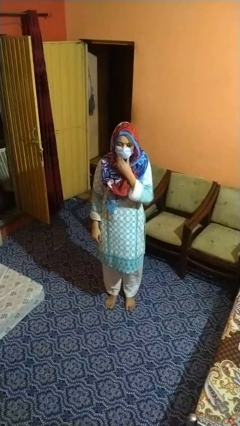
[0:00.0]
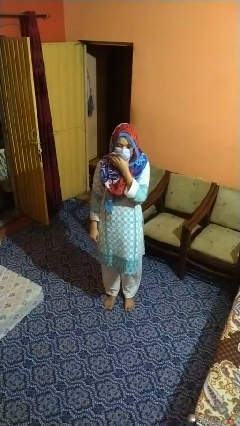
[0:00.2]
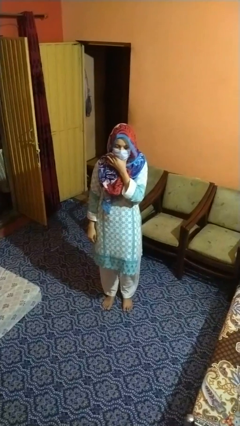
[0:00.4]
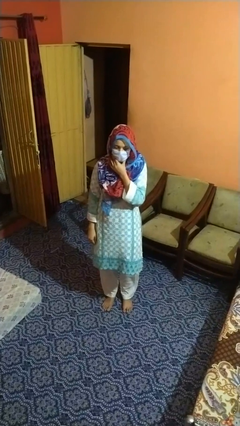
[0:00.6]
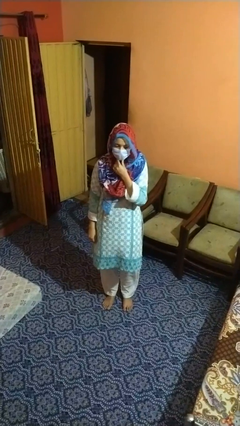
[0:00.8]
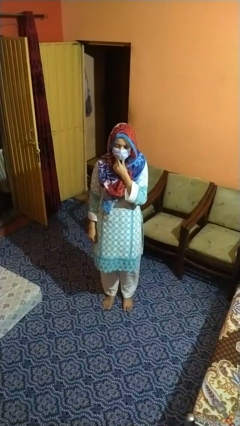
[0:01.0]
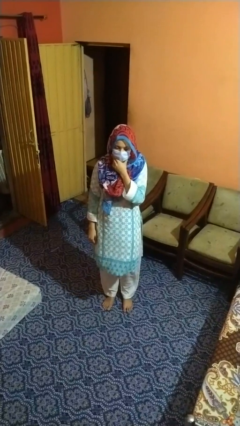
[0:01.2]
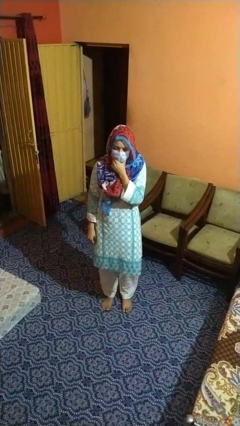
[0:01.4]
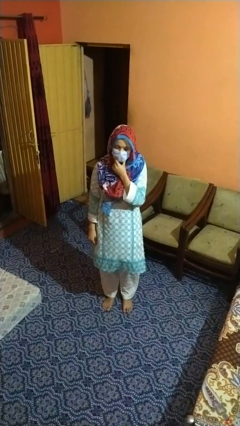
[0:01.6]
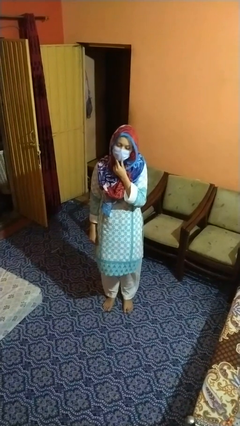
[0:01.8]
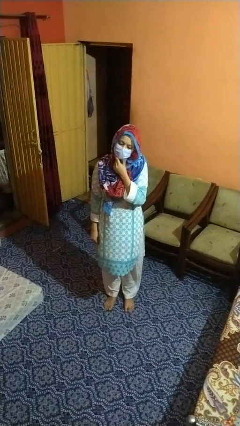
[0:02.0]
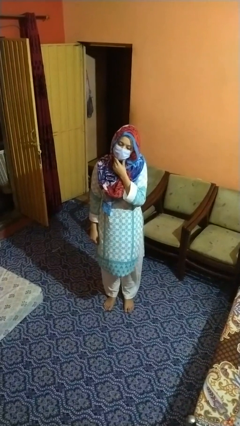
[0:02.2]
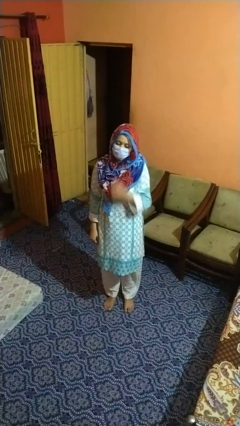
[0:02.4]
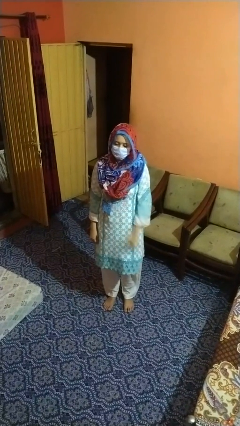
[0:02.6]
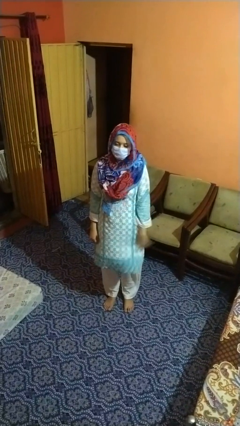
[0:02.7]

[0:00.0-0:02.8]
person strokes chin

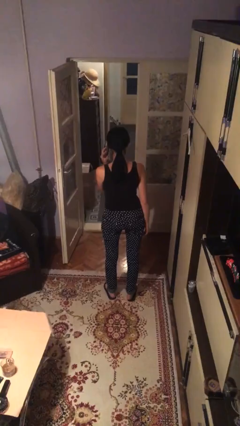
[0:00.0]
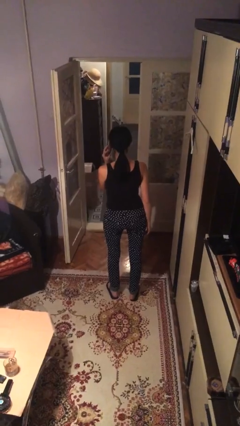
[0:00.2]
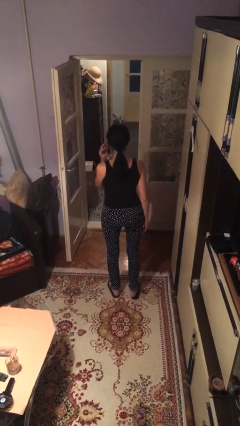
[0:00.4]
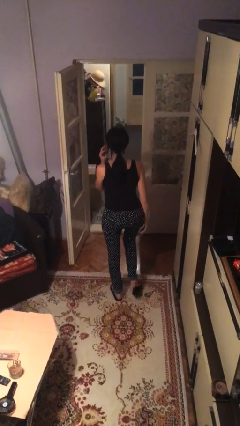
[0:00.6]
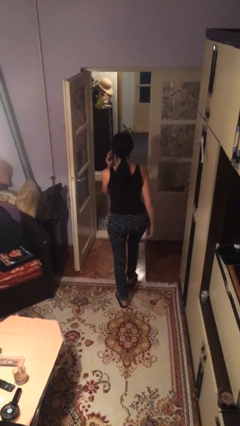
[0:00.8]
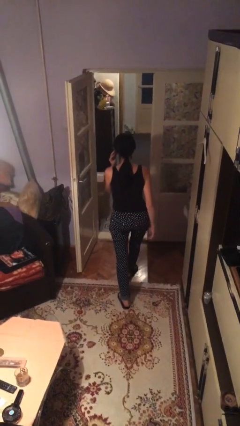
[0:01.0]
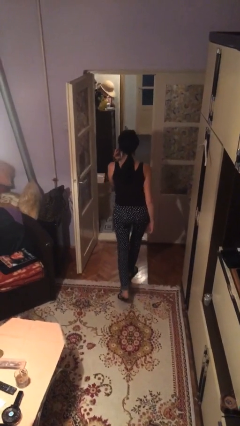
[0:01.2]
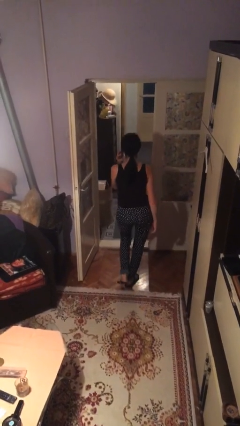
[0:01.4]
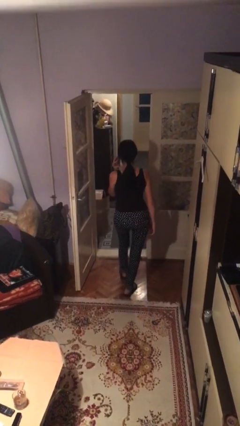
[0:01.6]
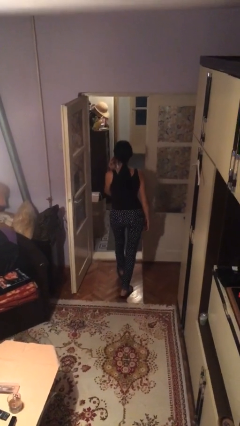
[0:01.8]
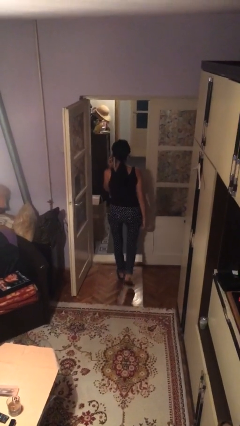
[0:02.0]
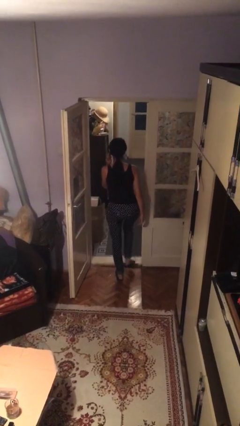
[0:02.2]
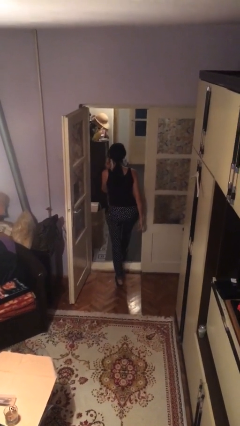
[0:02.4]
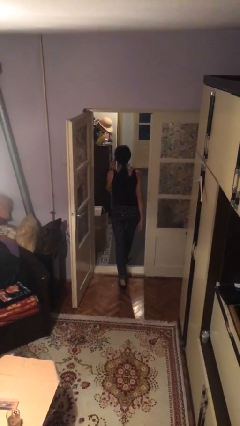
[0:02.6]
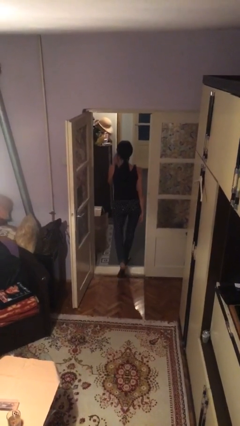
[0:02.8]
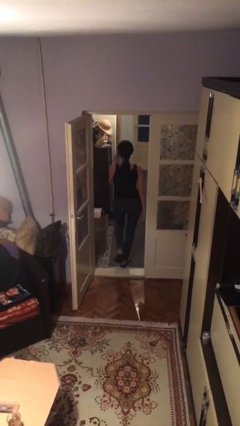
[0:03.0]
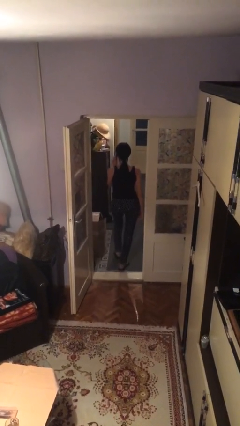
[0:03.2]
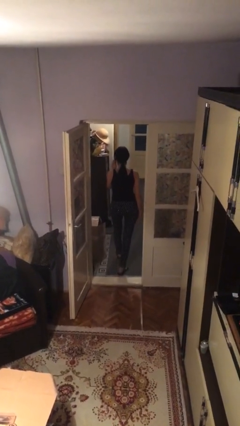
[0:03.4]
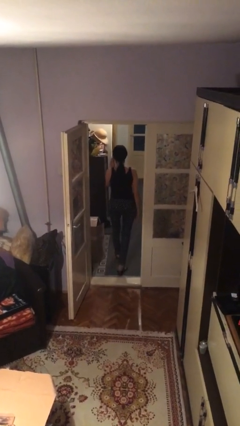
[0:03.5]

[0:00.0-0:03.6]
person exits scene through structure

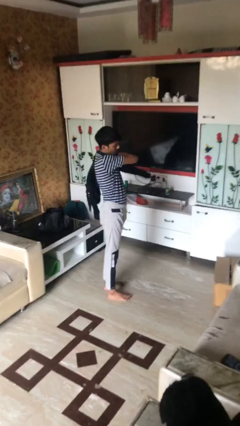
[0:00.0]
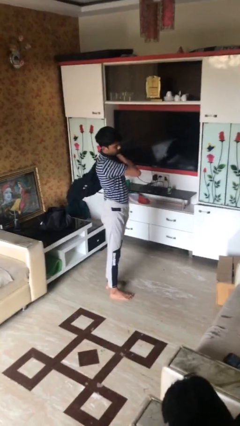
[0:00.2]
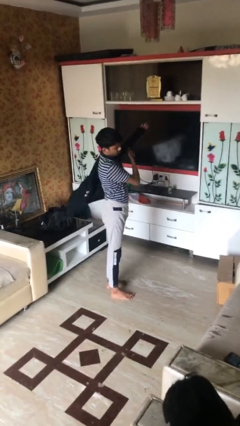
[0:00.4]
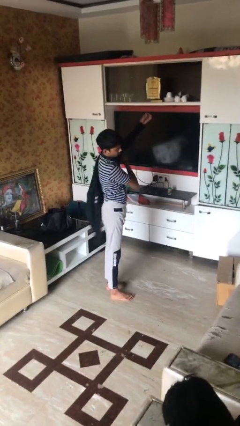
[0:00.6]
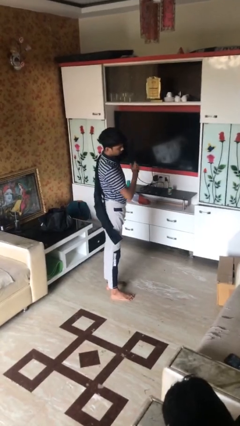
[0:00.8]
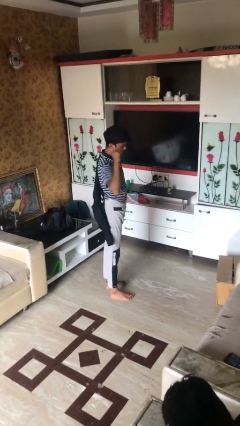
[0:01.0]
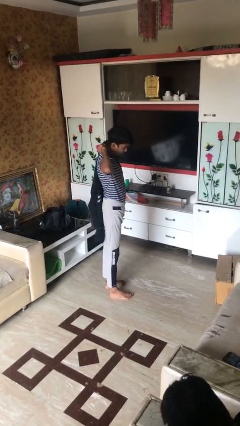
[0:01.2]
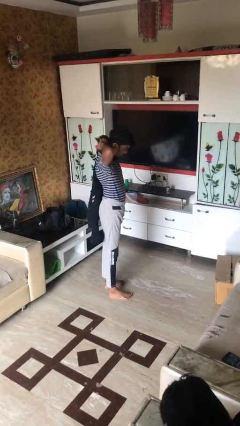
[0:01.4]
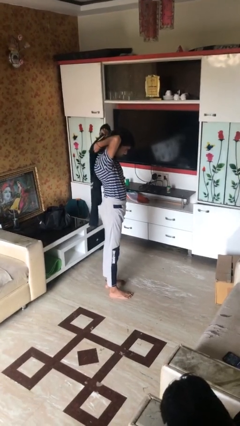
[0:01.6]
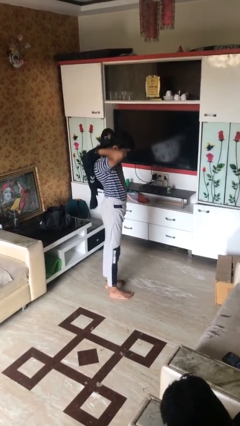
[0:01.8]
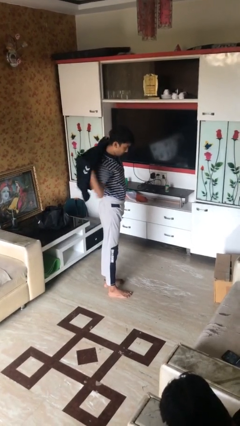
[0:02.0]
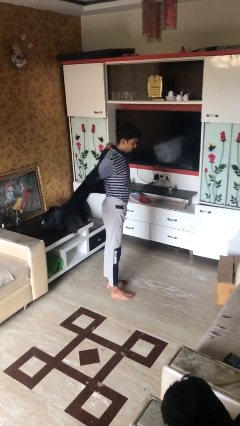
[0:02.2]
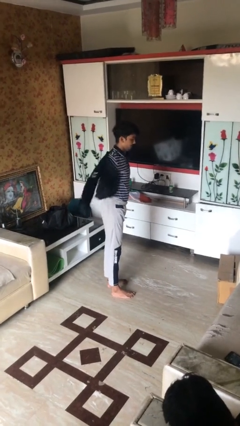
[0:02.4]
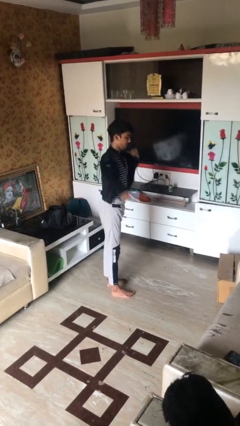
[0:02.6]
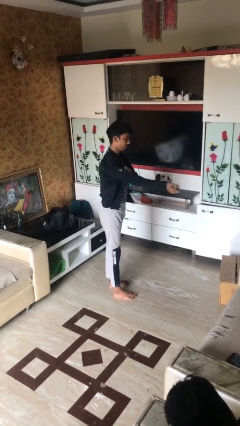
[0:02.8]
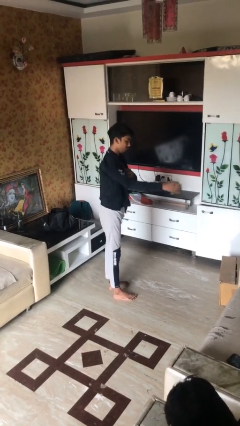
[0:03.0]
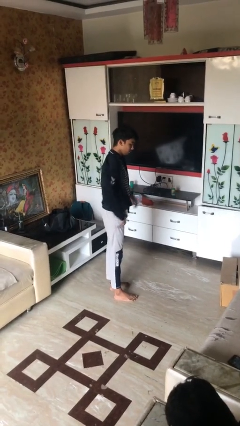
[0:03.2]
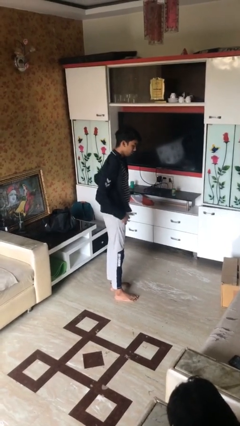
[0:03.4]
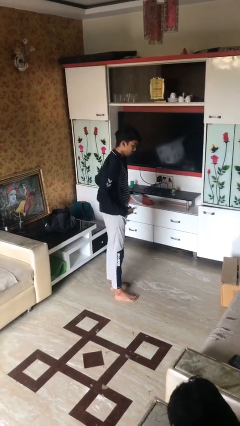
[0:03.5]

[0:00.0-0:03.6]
person puts on jacket

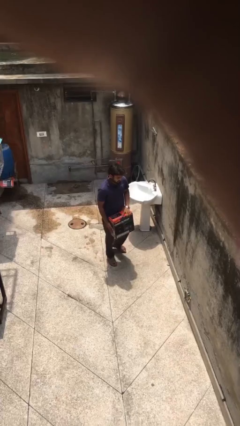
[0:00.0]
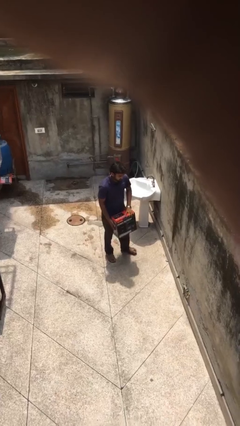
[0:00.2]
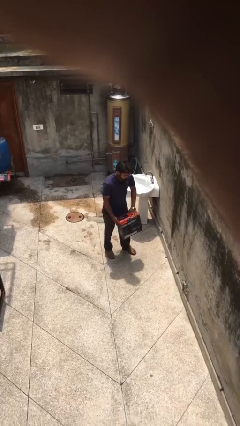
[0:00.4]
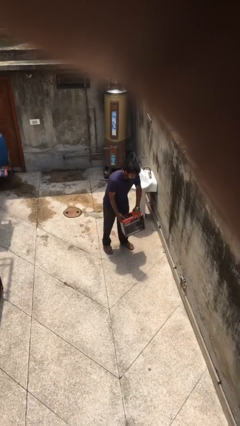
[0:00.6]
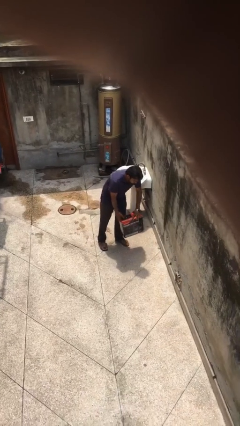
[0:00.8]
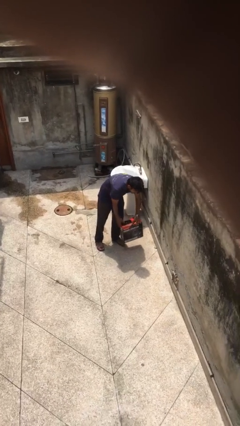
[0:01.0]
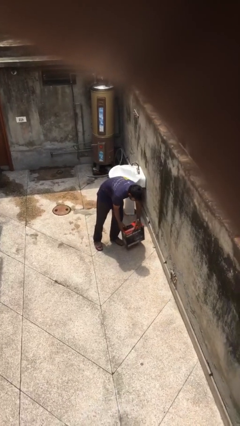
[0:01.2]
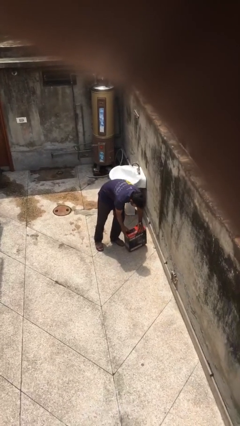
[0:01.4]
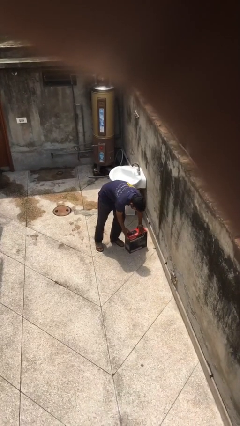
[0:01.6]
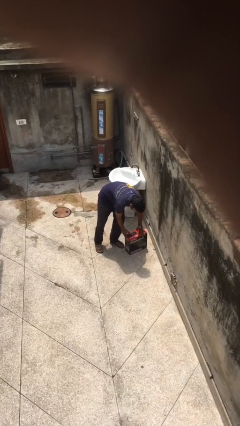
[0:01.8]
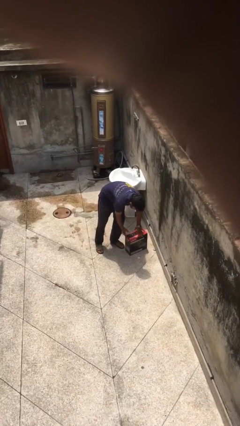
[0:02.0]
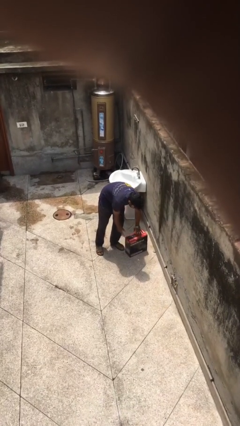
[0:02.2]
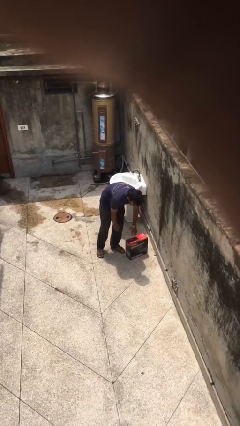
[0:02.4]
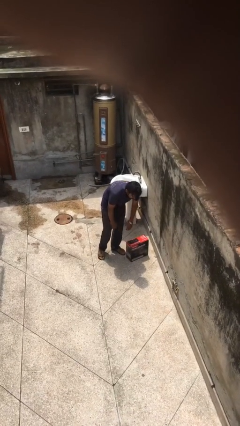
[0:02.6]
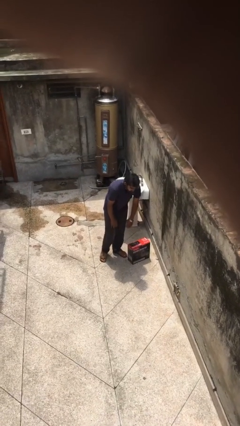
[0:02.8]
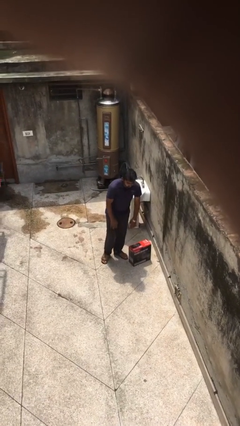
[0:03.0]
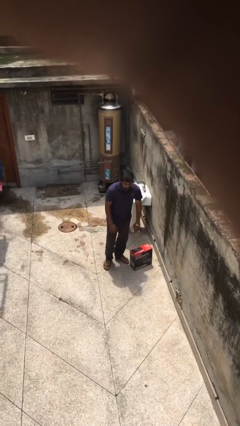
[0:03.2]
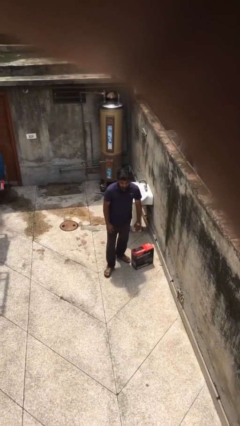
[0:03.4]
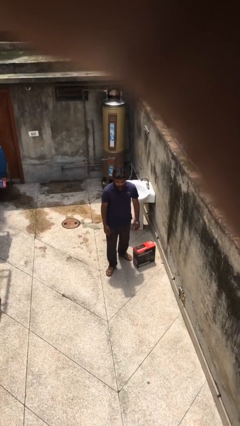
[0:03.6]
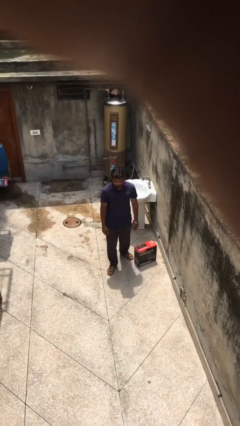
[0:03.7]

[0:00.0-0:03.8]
person puts down object on floor

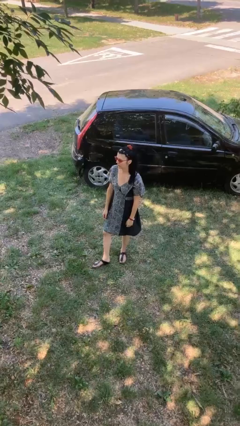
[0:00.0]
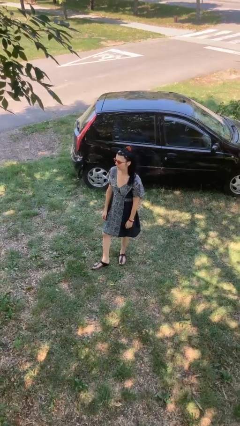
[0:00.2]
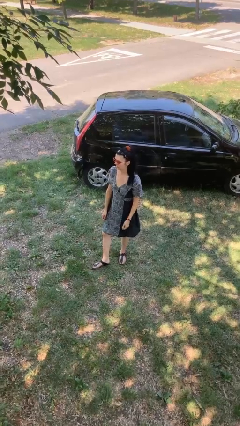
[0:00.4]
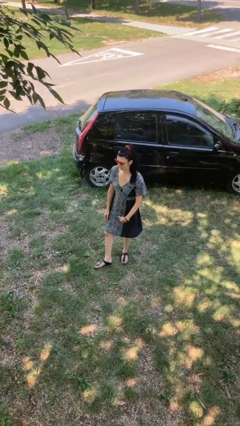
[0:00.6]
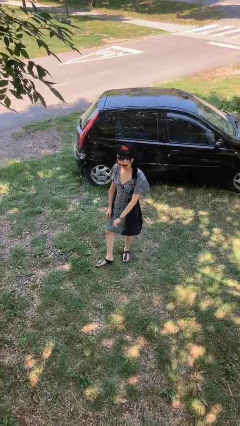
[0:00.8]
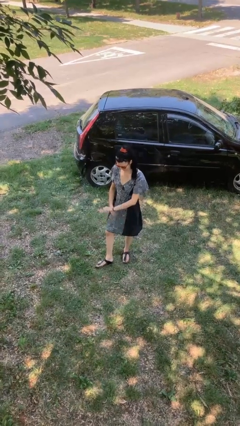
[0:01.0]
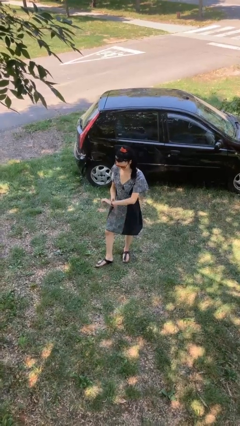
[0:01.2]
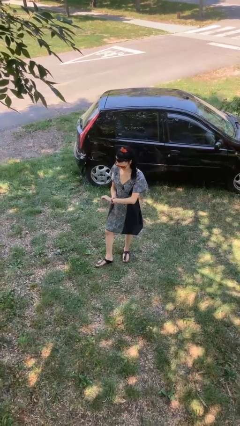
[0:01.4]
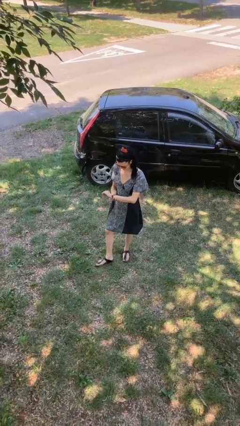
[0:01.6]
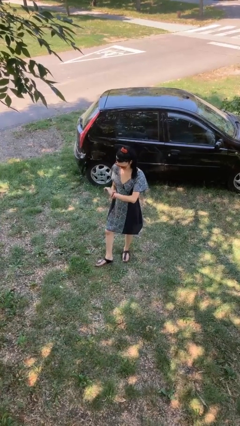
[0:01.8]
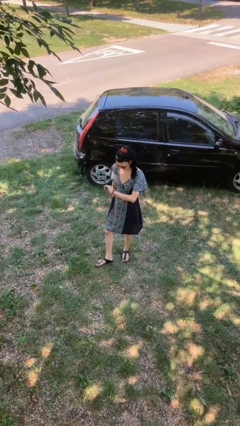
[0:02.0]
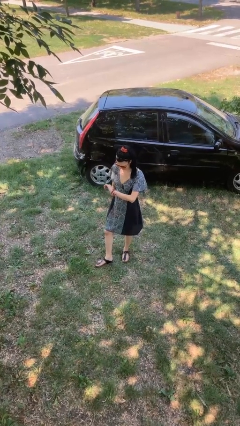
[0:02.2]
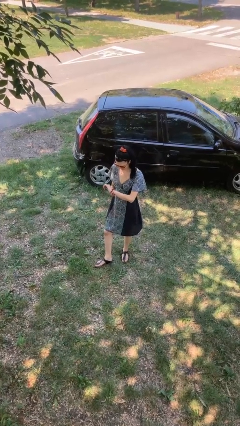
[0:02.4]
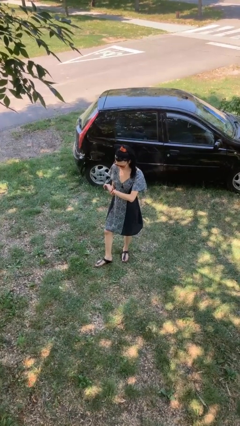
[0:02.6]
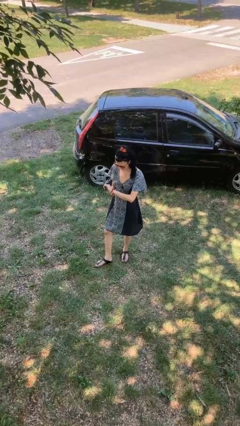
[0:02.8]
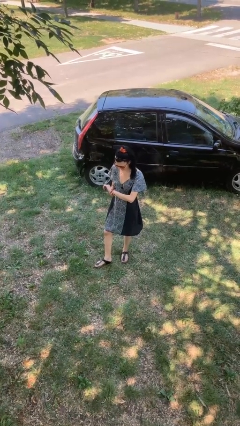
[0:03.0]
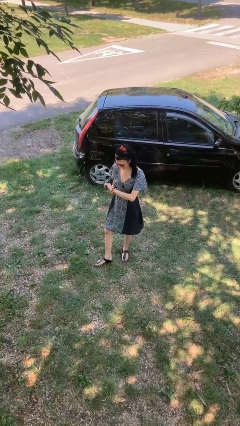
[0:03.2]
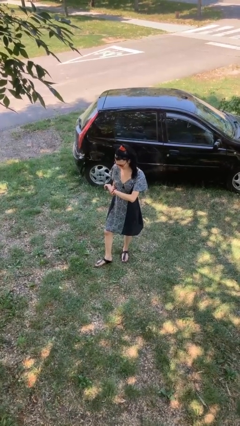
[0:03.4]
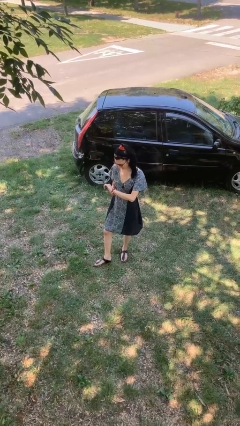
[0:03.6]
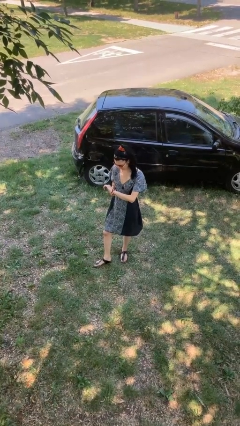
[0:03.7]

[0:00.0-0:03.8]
person looks at wristwatch
